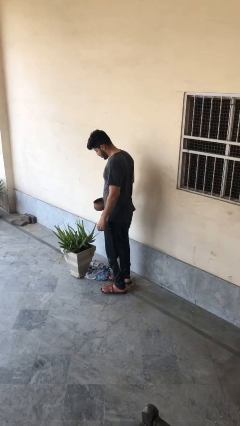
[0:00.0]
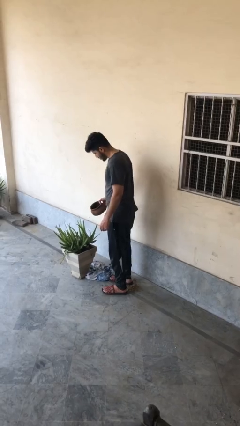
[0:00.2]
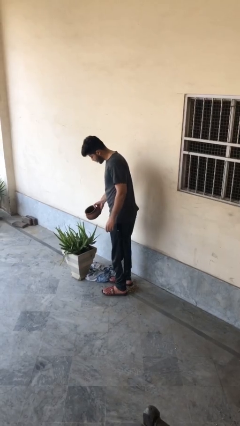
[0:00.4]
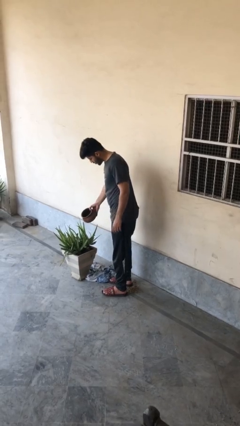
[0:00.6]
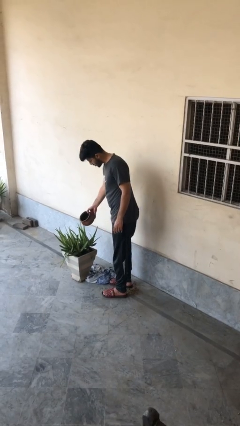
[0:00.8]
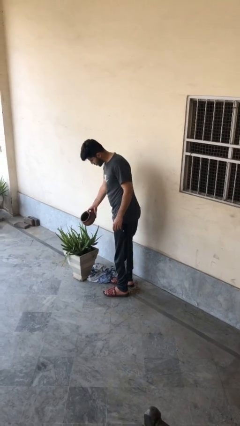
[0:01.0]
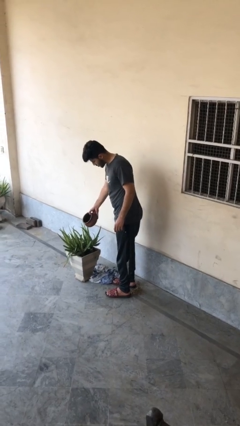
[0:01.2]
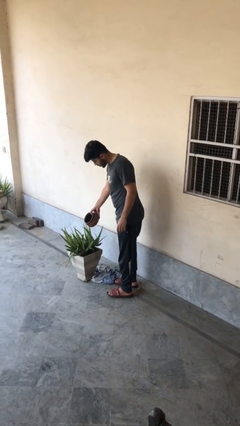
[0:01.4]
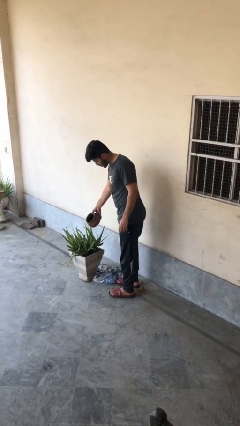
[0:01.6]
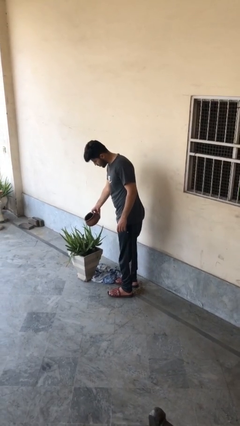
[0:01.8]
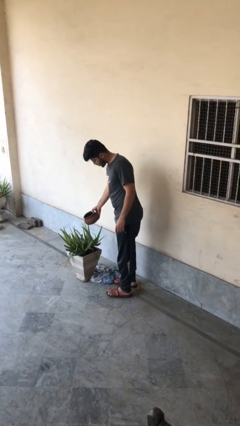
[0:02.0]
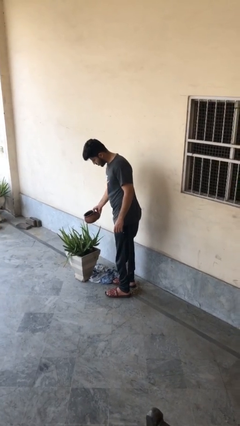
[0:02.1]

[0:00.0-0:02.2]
person waters houseplant

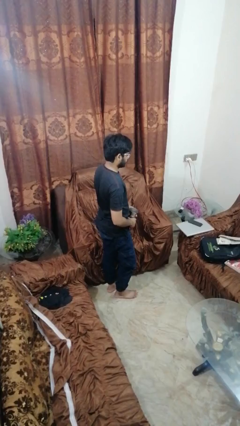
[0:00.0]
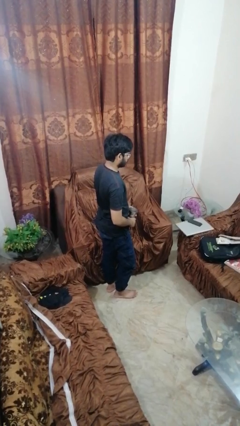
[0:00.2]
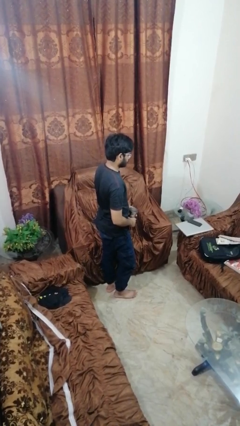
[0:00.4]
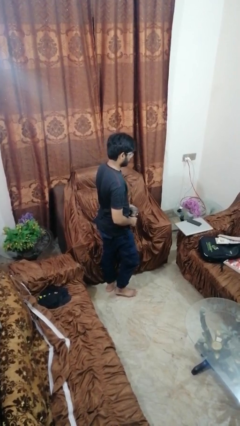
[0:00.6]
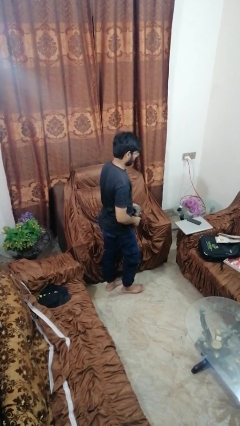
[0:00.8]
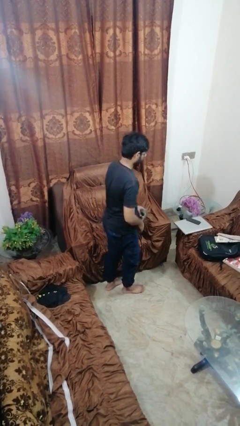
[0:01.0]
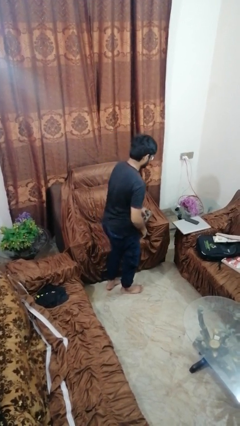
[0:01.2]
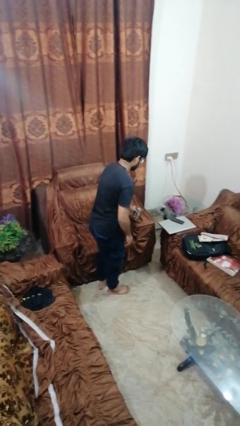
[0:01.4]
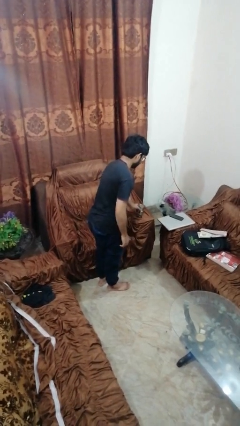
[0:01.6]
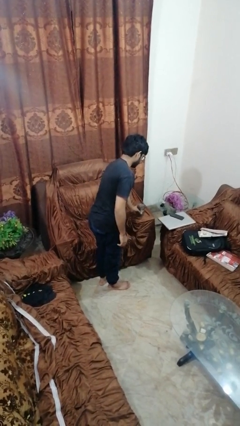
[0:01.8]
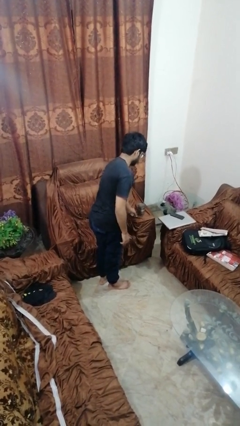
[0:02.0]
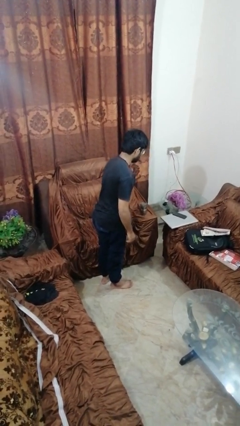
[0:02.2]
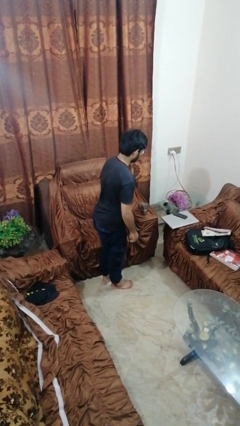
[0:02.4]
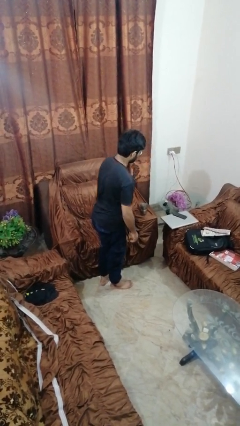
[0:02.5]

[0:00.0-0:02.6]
person puts down object on couch

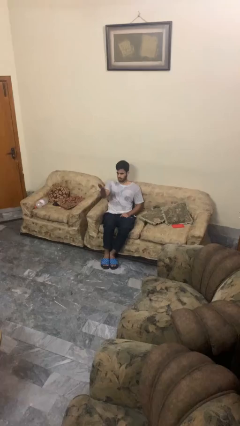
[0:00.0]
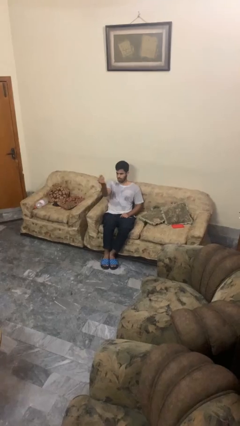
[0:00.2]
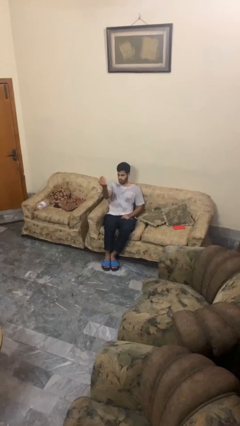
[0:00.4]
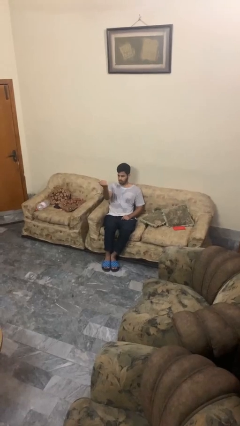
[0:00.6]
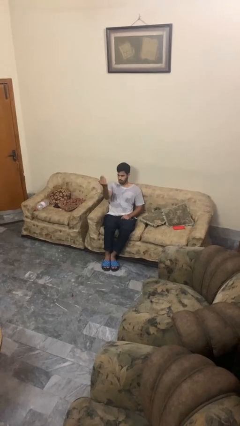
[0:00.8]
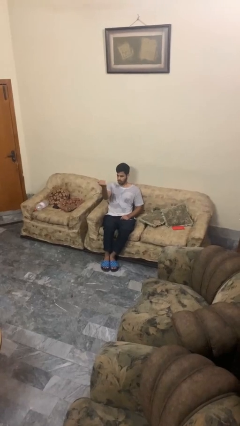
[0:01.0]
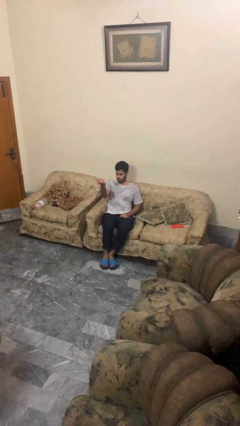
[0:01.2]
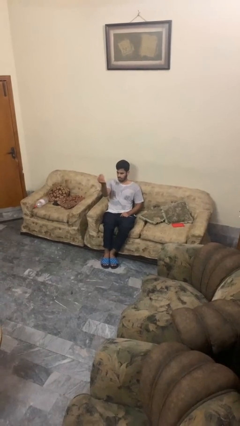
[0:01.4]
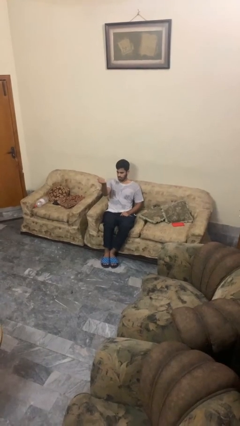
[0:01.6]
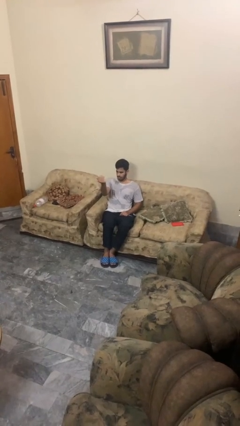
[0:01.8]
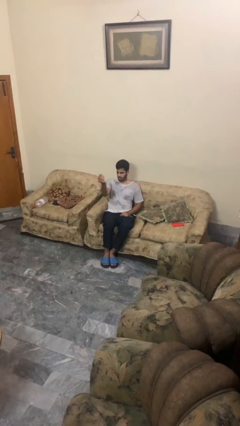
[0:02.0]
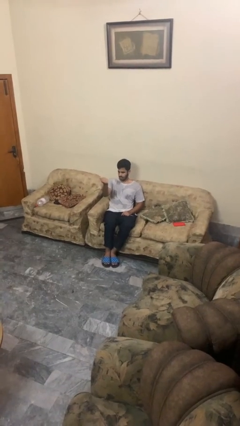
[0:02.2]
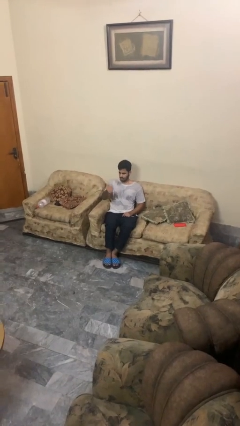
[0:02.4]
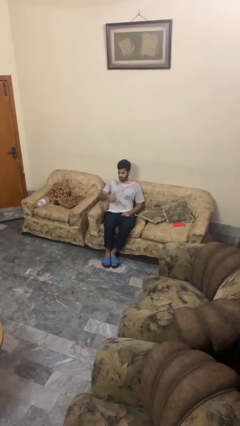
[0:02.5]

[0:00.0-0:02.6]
person gestures come here

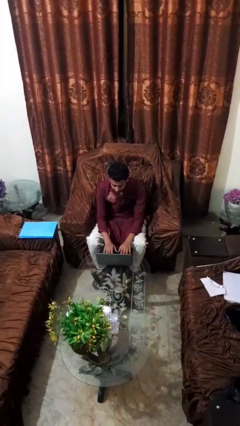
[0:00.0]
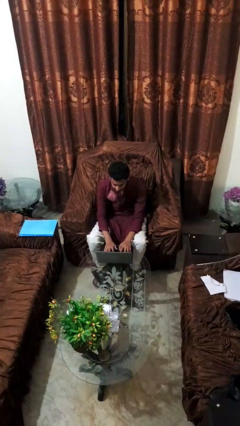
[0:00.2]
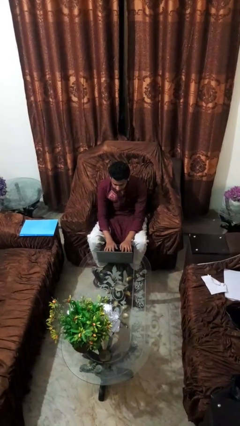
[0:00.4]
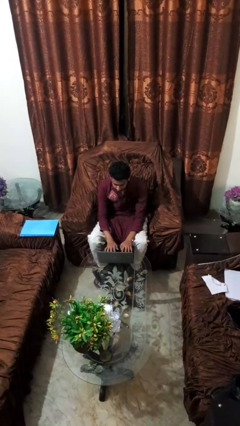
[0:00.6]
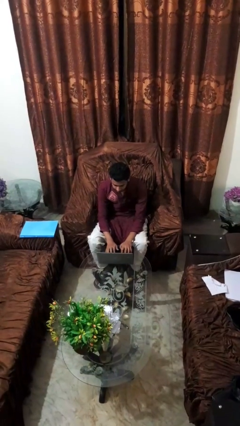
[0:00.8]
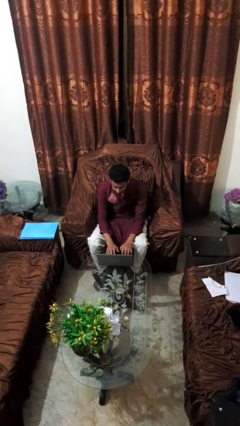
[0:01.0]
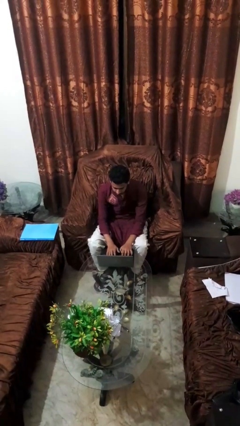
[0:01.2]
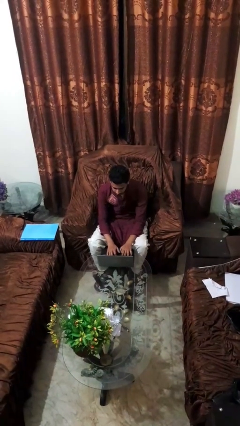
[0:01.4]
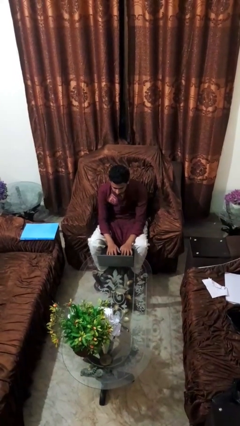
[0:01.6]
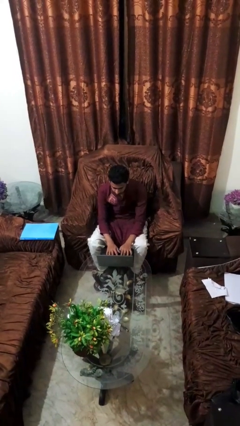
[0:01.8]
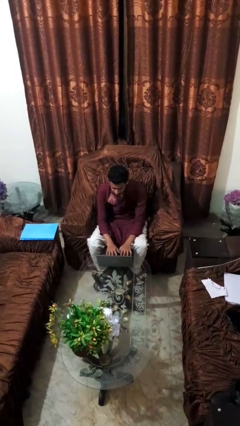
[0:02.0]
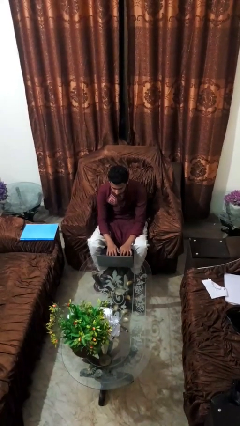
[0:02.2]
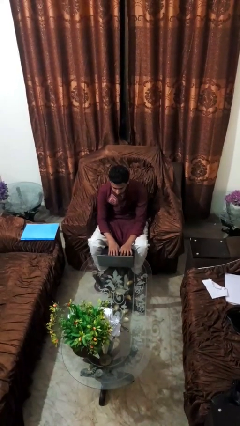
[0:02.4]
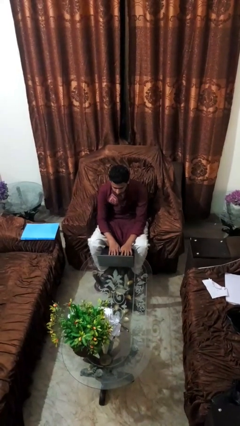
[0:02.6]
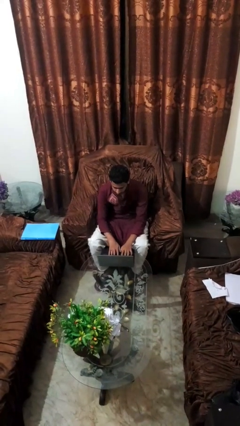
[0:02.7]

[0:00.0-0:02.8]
person interacts with laptop

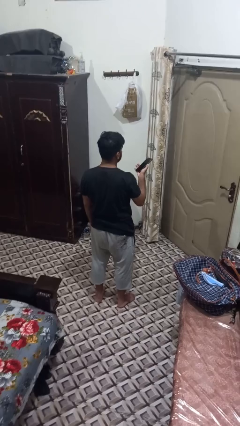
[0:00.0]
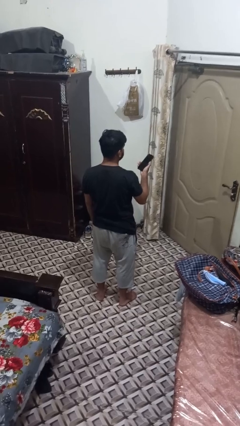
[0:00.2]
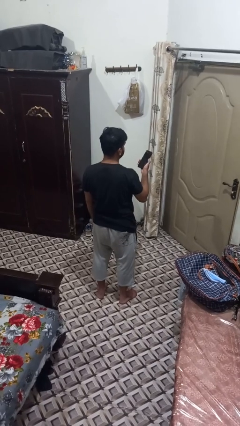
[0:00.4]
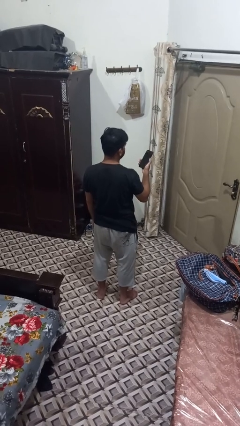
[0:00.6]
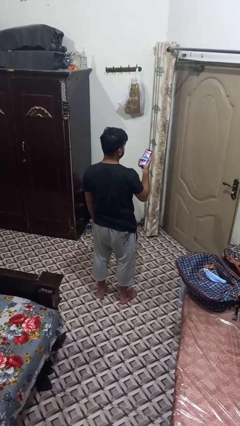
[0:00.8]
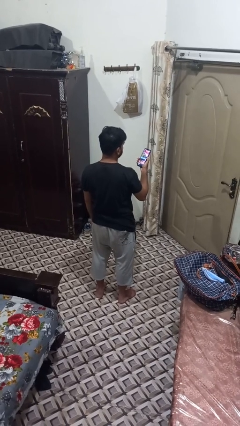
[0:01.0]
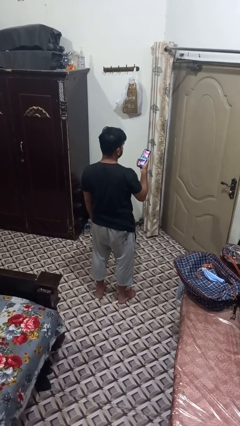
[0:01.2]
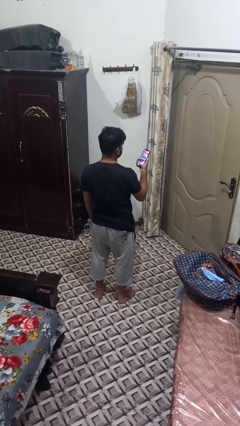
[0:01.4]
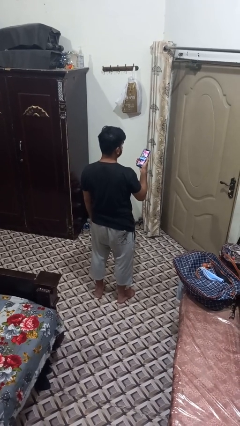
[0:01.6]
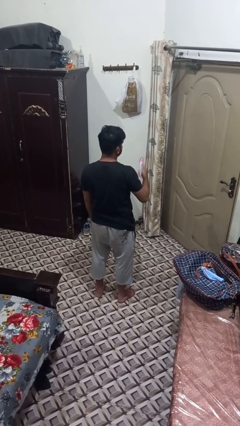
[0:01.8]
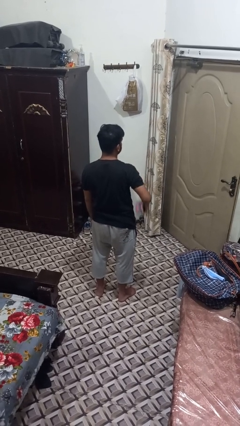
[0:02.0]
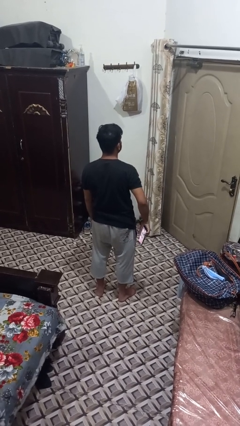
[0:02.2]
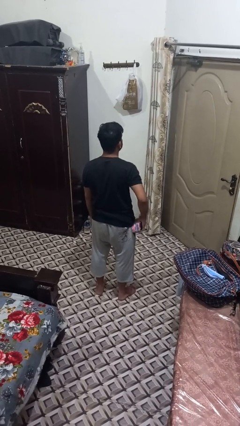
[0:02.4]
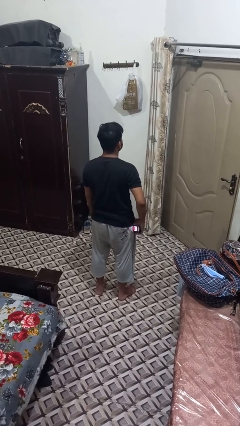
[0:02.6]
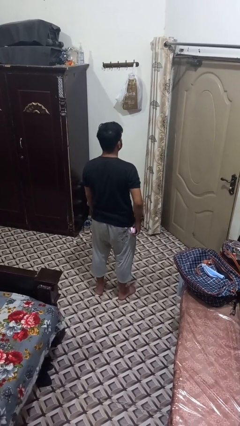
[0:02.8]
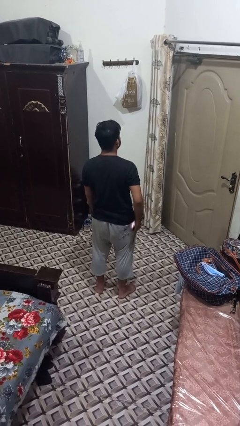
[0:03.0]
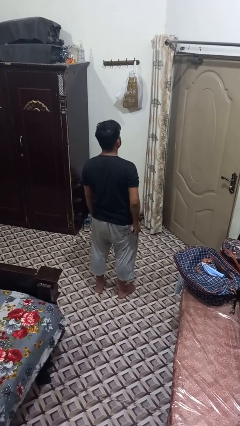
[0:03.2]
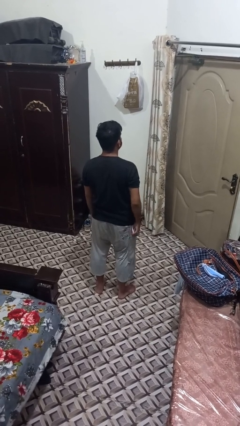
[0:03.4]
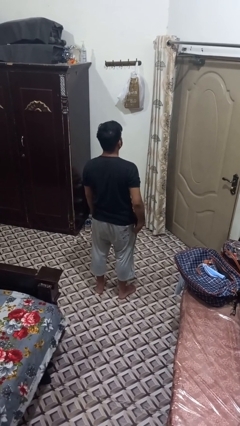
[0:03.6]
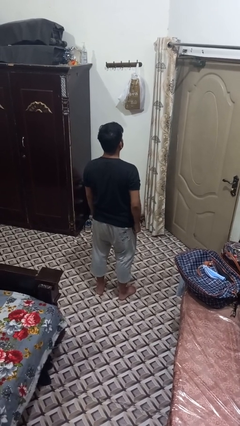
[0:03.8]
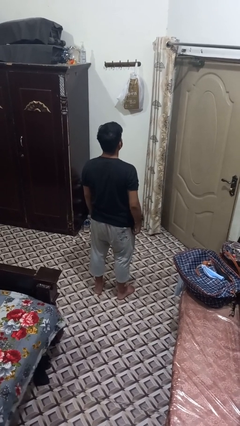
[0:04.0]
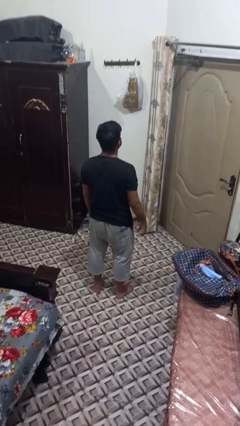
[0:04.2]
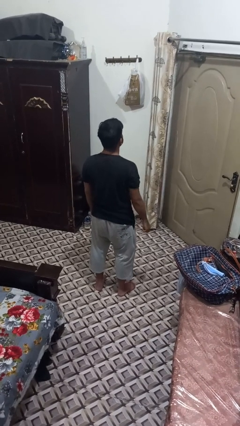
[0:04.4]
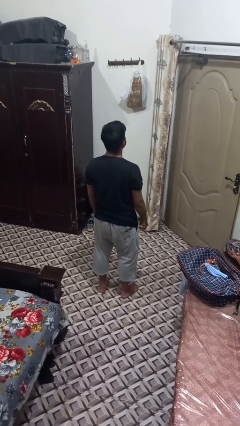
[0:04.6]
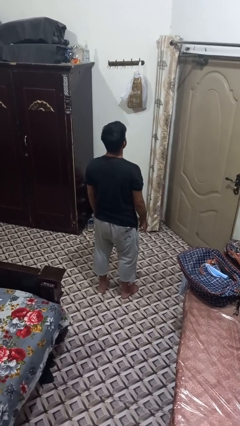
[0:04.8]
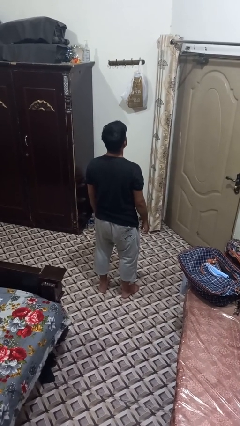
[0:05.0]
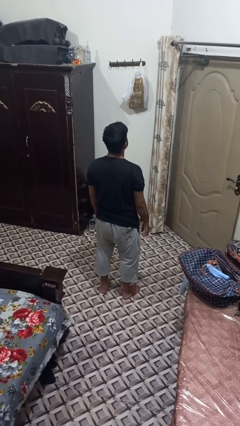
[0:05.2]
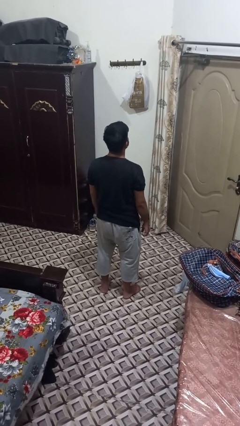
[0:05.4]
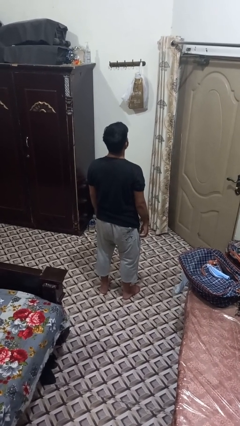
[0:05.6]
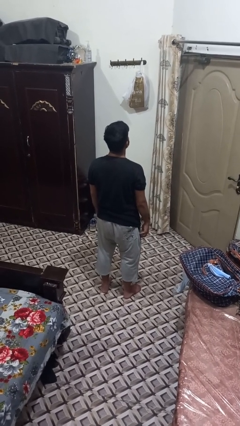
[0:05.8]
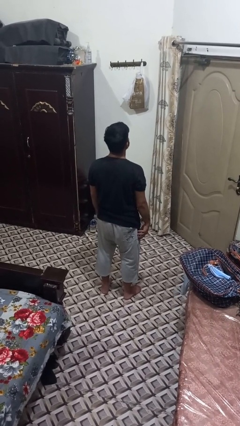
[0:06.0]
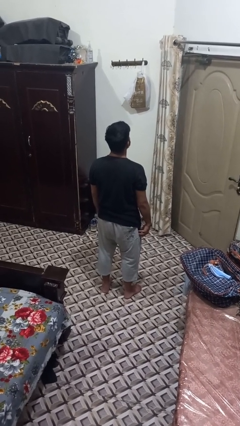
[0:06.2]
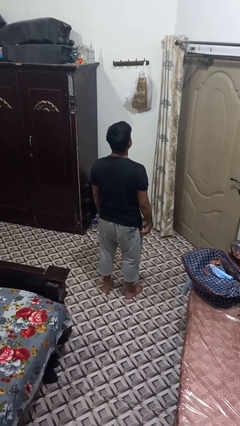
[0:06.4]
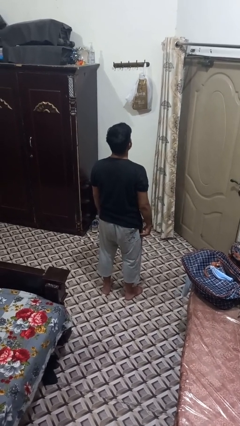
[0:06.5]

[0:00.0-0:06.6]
person puts phone into pocket

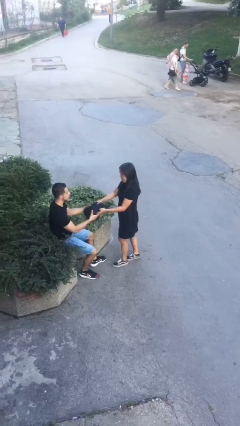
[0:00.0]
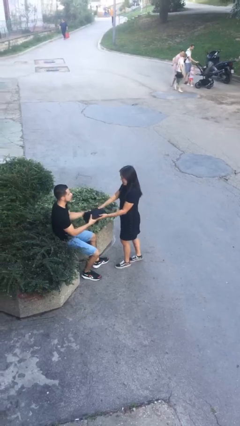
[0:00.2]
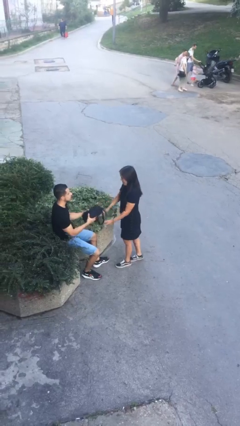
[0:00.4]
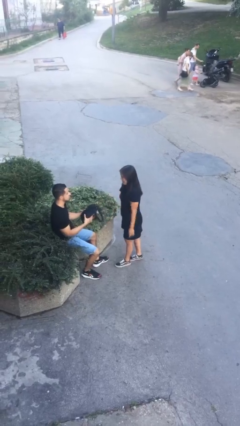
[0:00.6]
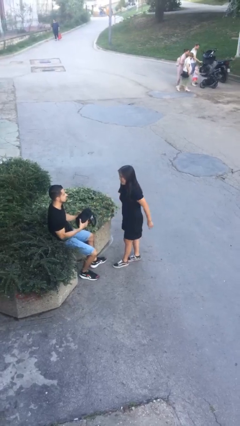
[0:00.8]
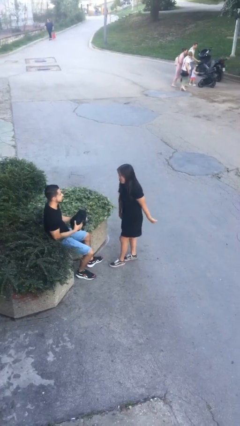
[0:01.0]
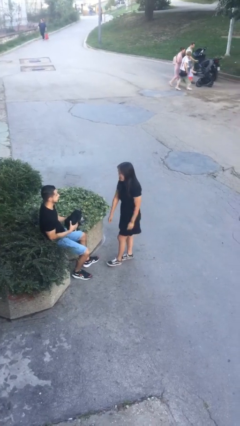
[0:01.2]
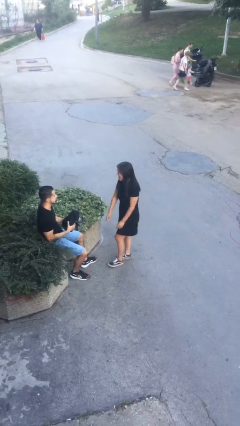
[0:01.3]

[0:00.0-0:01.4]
person transfers object to person
